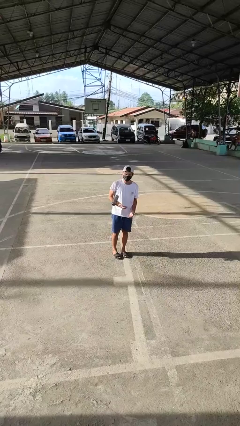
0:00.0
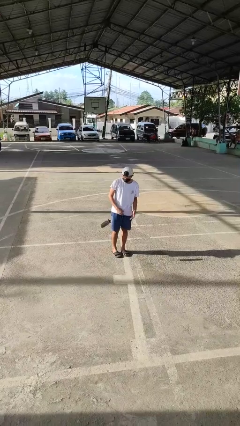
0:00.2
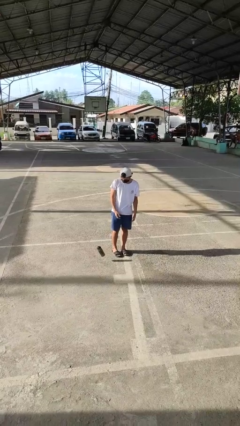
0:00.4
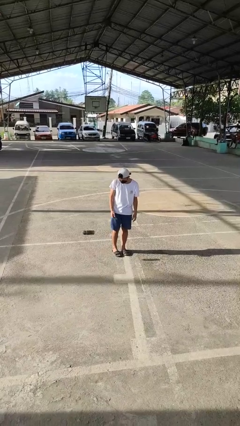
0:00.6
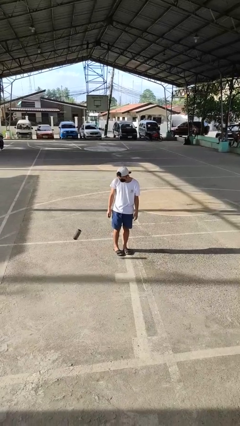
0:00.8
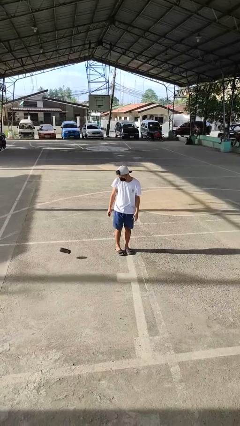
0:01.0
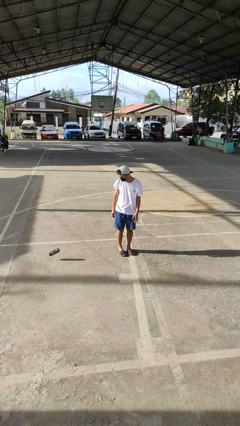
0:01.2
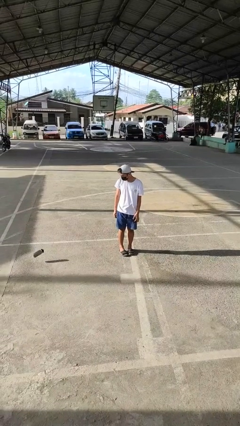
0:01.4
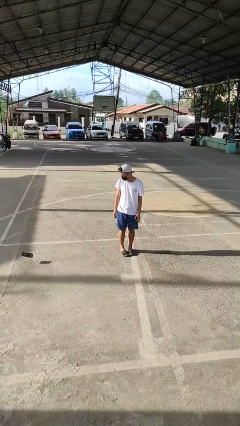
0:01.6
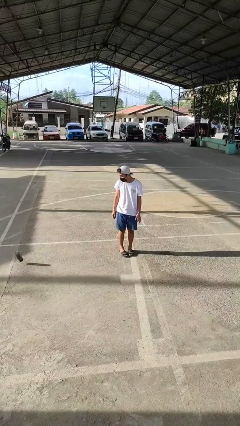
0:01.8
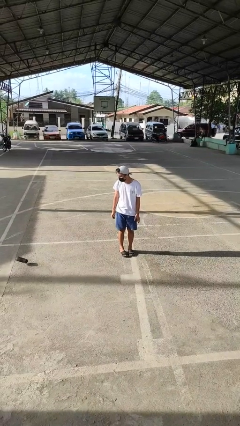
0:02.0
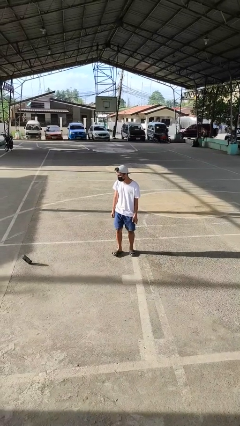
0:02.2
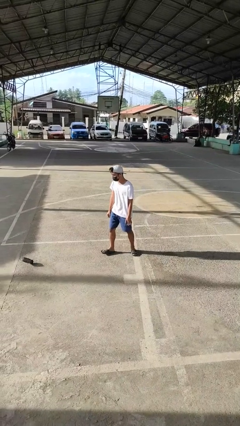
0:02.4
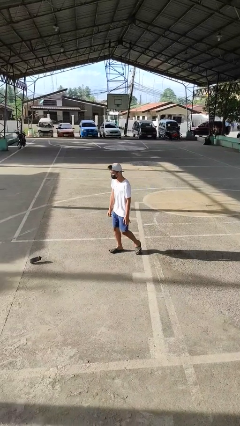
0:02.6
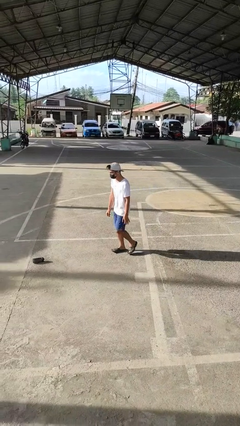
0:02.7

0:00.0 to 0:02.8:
person drops object

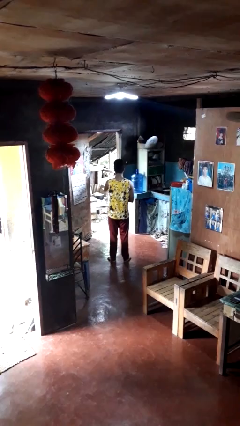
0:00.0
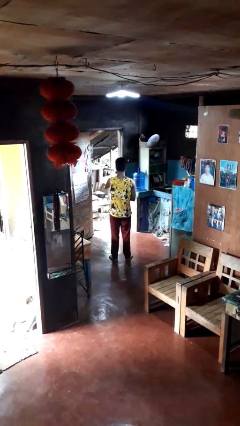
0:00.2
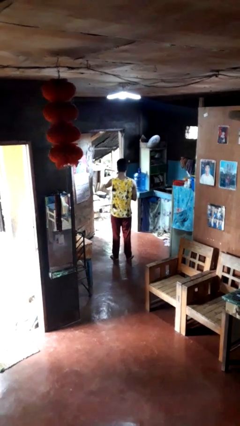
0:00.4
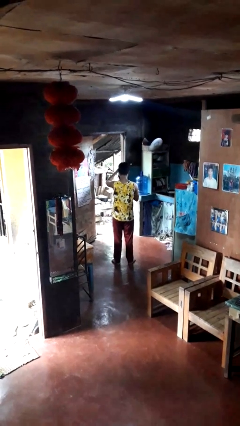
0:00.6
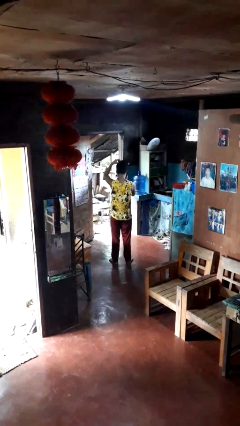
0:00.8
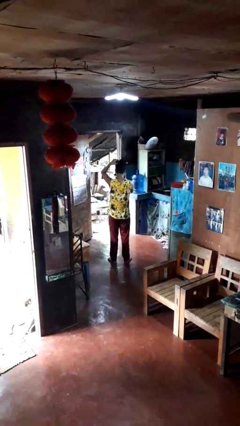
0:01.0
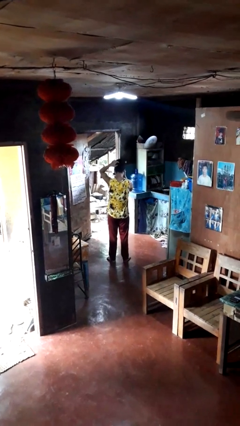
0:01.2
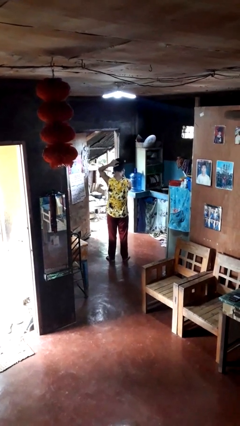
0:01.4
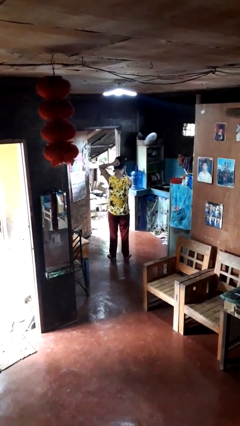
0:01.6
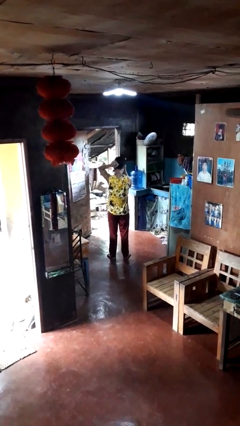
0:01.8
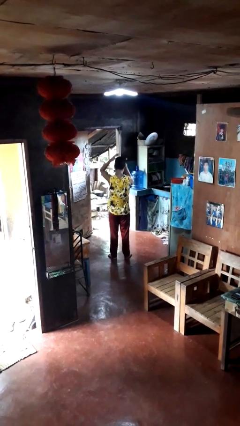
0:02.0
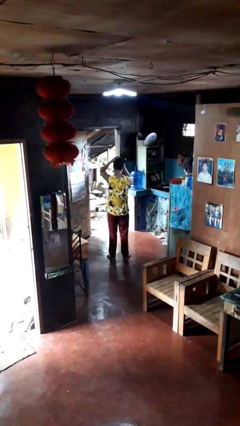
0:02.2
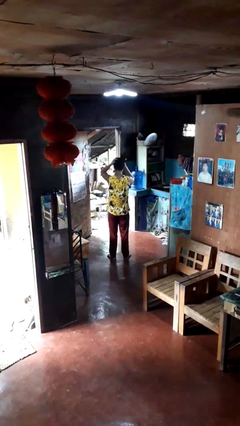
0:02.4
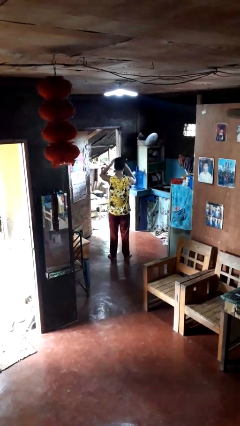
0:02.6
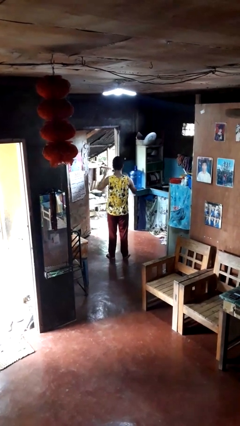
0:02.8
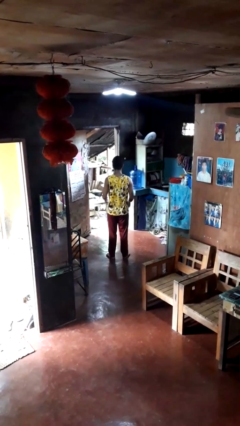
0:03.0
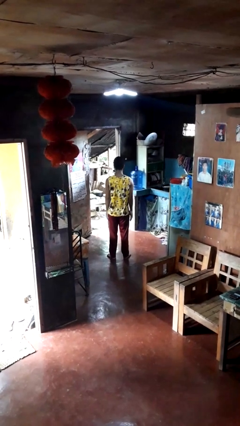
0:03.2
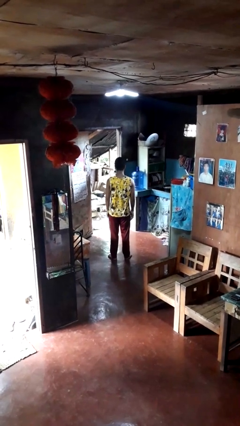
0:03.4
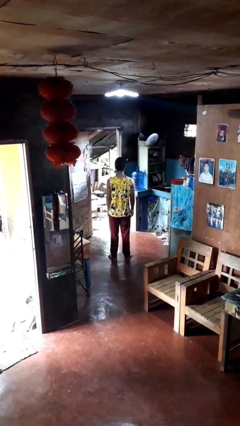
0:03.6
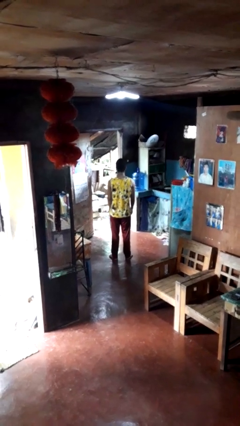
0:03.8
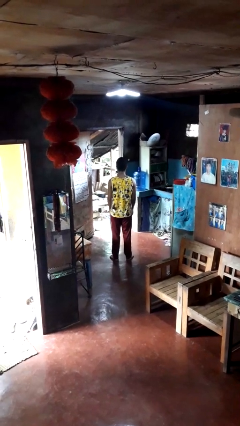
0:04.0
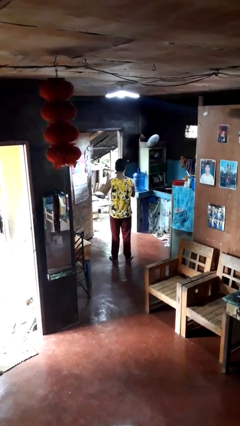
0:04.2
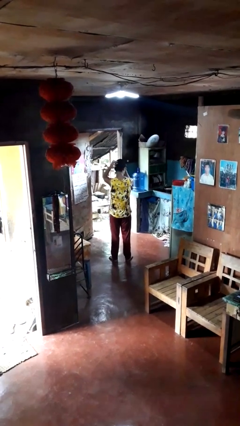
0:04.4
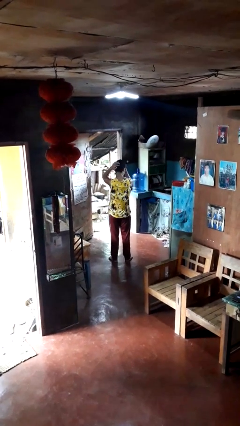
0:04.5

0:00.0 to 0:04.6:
person puts on hat

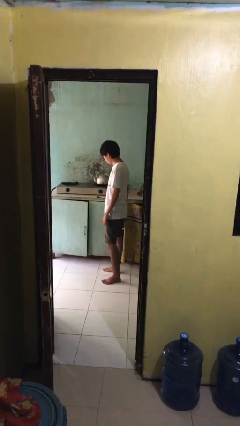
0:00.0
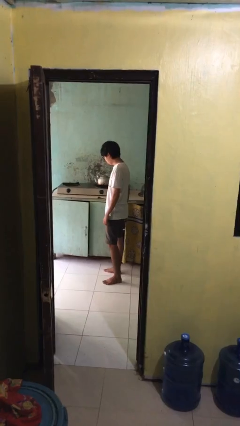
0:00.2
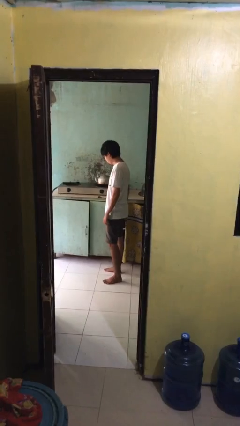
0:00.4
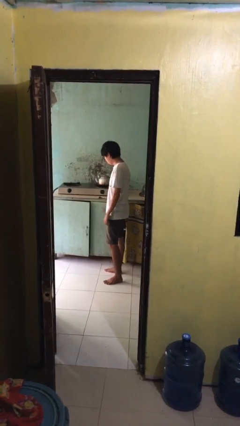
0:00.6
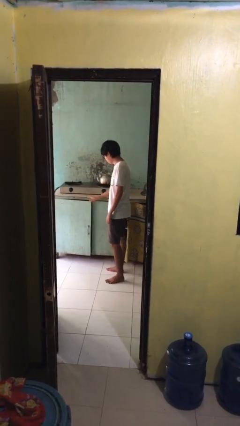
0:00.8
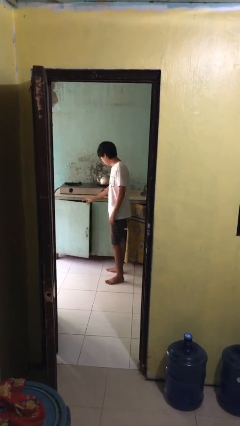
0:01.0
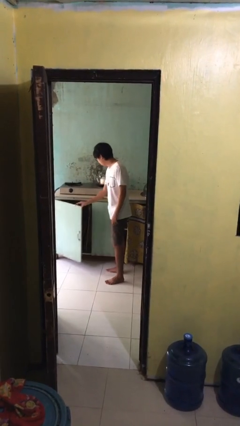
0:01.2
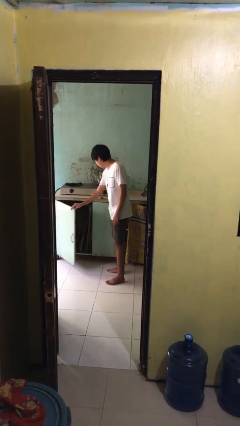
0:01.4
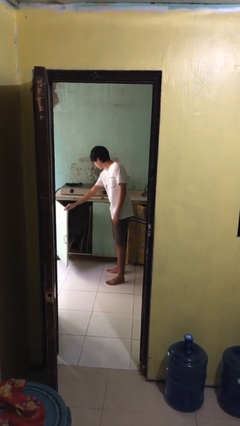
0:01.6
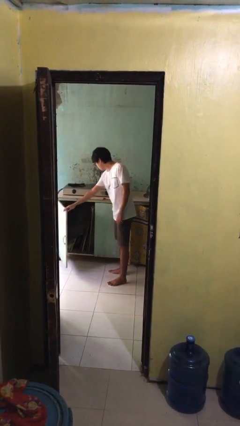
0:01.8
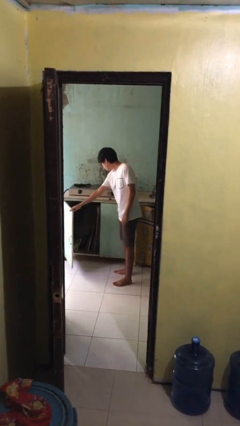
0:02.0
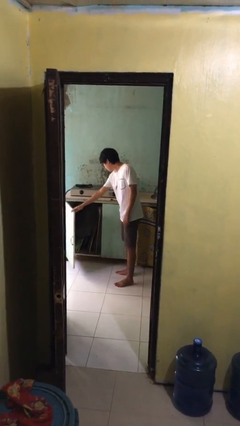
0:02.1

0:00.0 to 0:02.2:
person opens cabinet

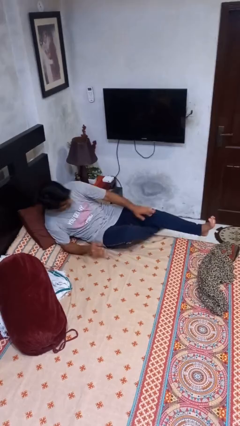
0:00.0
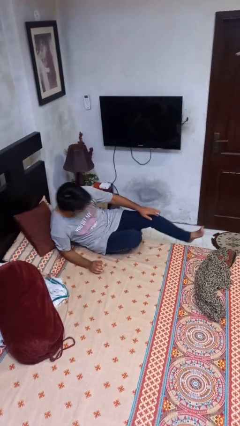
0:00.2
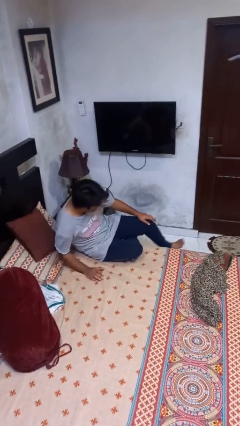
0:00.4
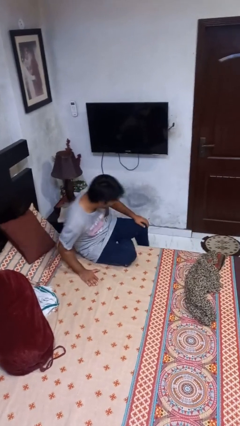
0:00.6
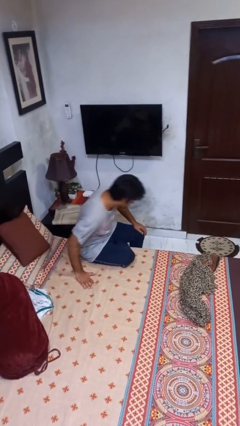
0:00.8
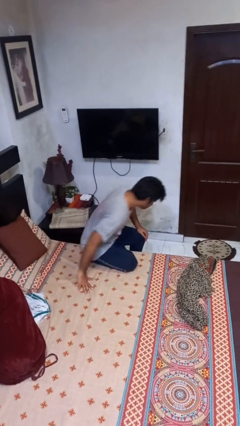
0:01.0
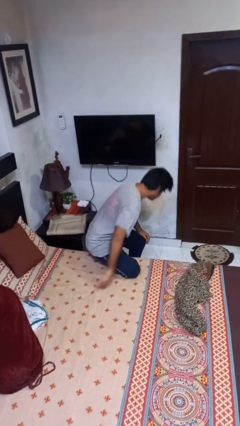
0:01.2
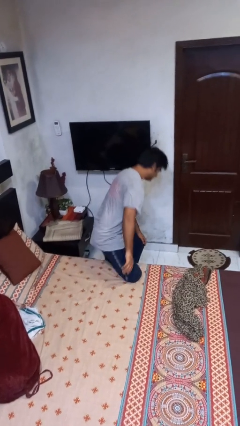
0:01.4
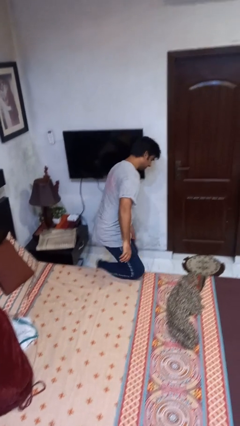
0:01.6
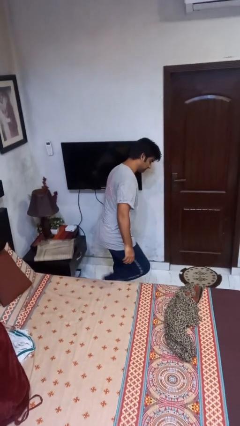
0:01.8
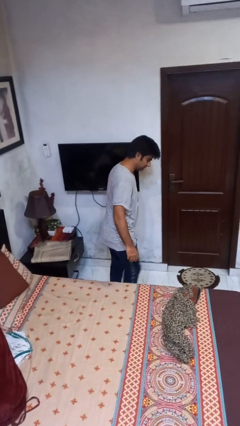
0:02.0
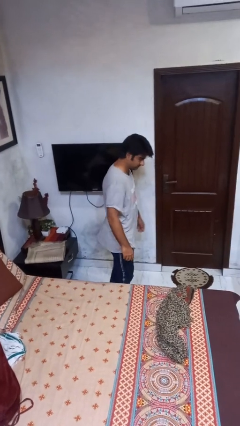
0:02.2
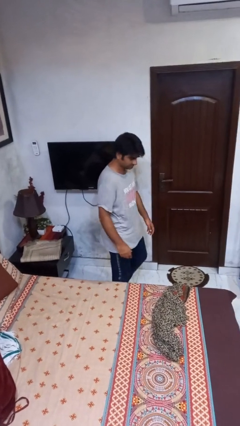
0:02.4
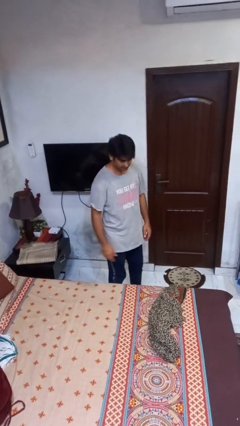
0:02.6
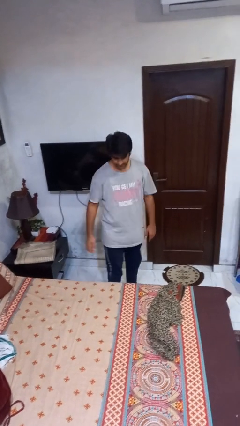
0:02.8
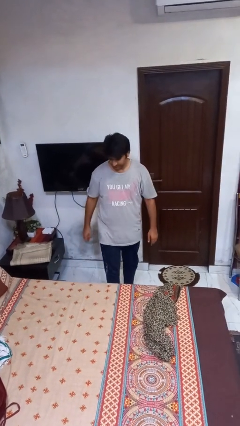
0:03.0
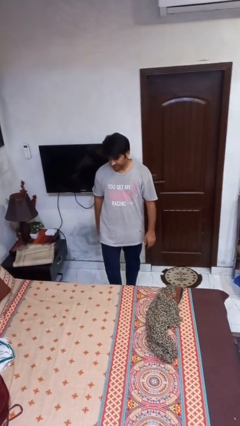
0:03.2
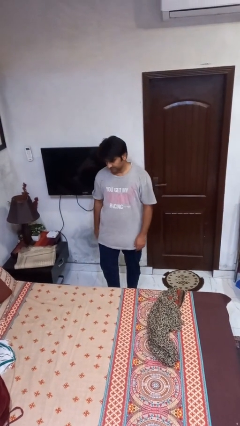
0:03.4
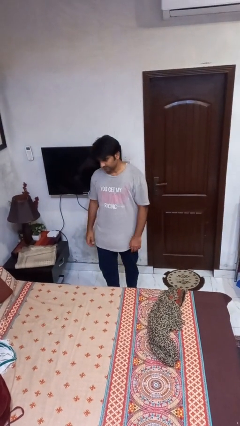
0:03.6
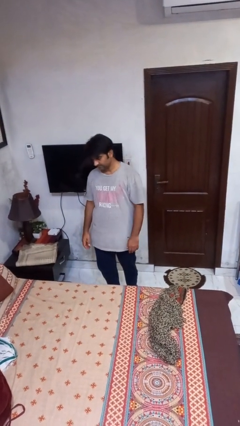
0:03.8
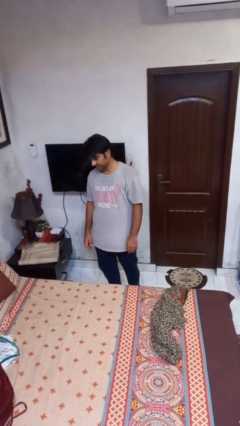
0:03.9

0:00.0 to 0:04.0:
person stands up

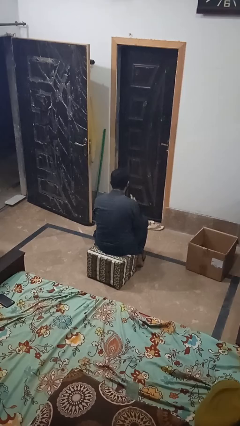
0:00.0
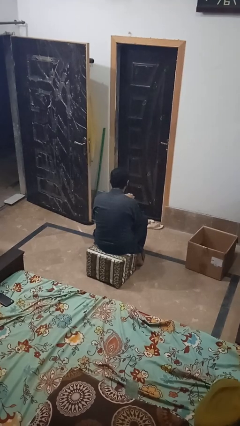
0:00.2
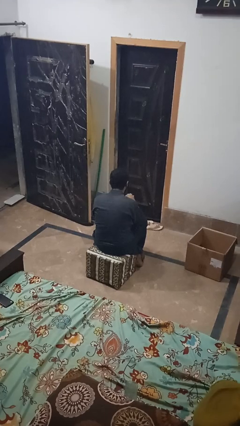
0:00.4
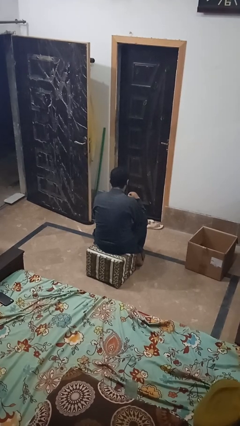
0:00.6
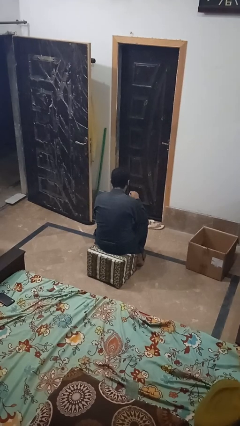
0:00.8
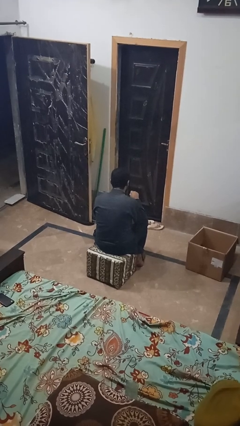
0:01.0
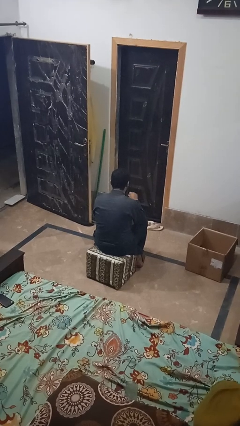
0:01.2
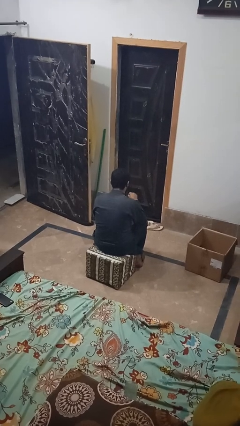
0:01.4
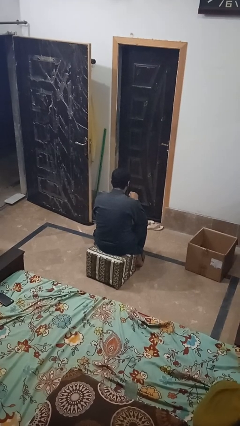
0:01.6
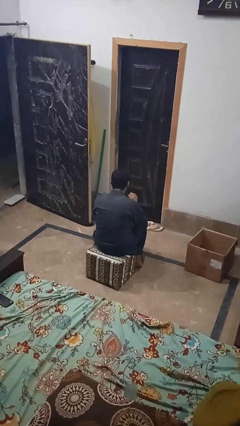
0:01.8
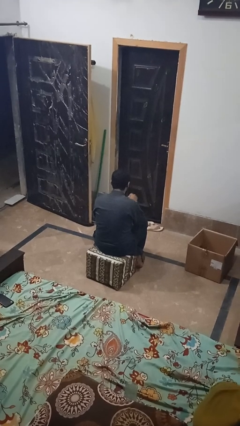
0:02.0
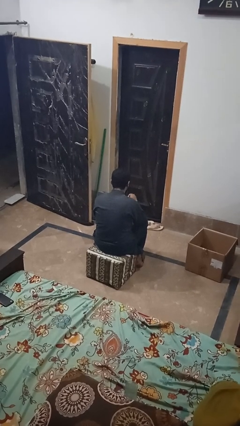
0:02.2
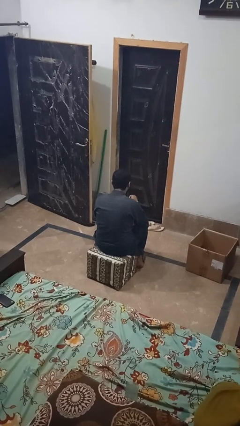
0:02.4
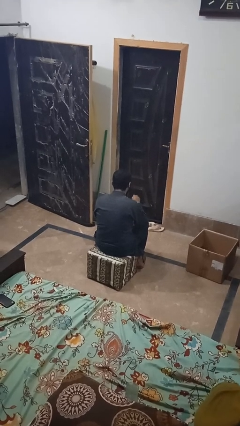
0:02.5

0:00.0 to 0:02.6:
person stirs mug

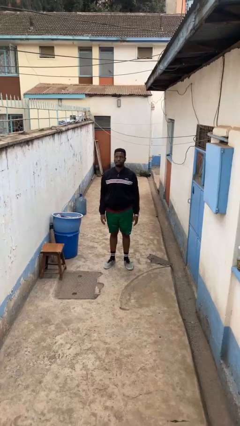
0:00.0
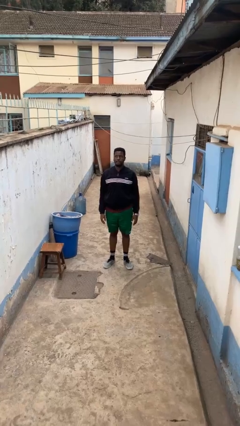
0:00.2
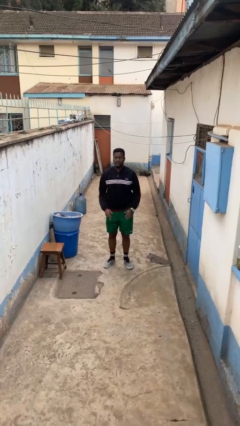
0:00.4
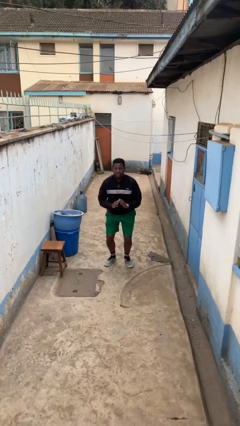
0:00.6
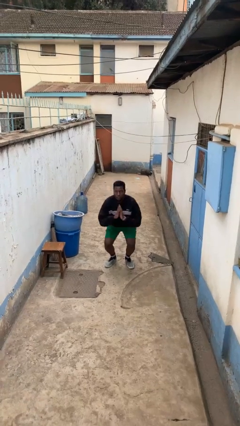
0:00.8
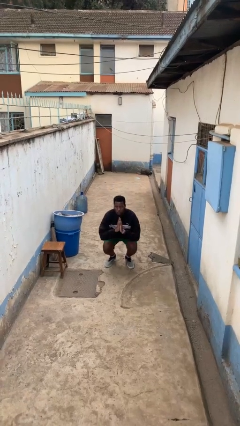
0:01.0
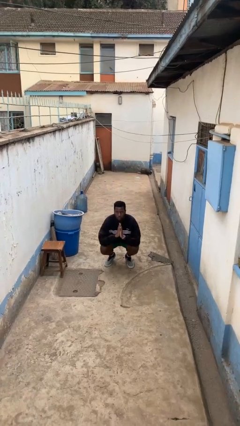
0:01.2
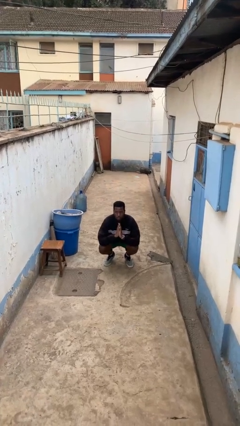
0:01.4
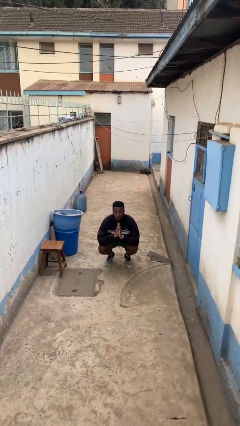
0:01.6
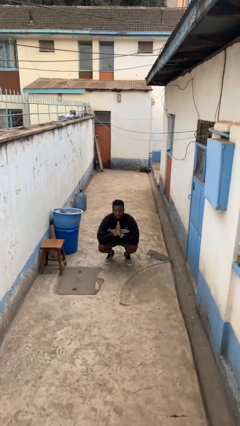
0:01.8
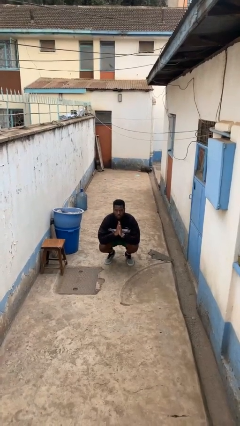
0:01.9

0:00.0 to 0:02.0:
person squats
